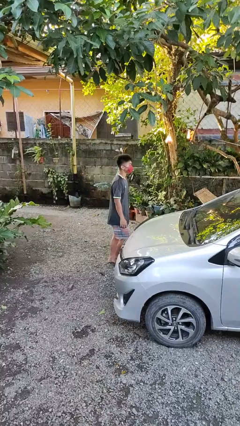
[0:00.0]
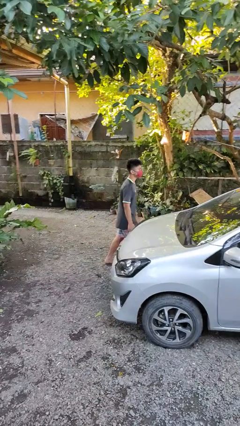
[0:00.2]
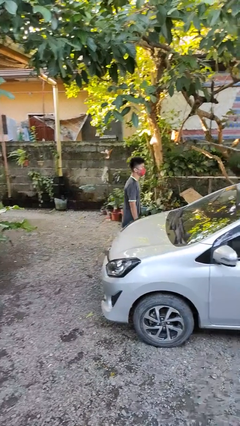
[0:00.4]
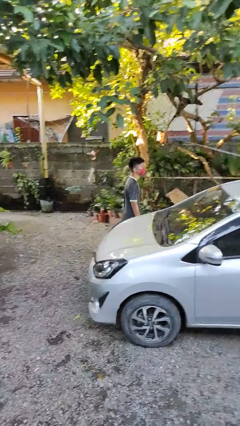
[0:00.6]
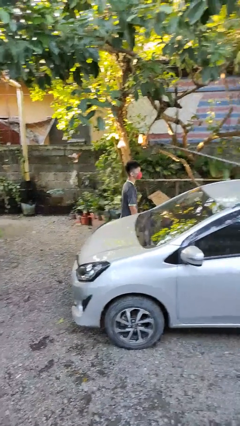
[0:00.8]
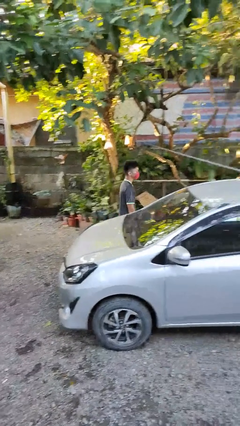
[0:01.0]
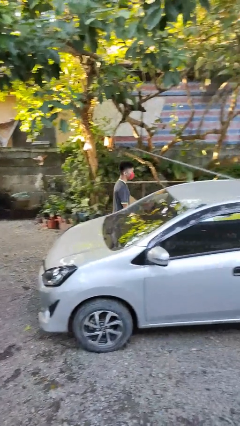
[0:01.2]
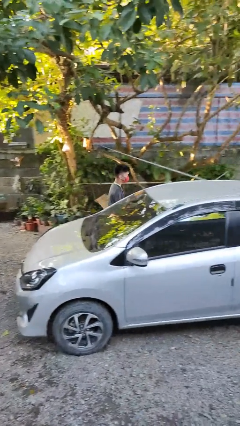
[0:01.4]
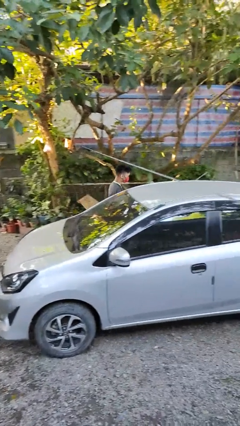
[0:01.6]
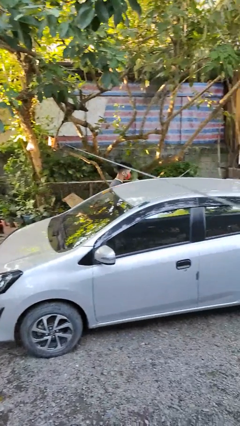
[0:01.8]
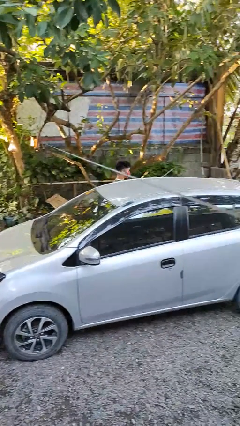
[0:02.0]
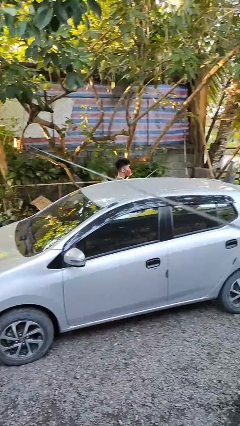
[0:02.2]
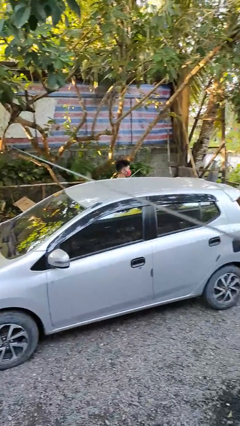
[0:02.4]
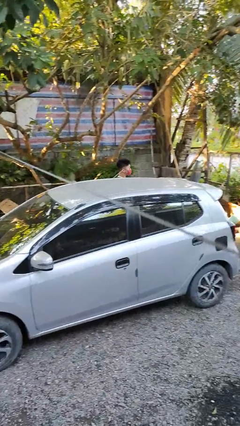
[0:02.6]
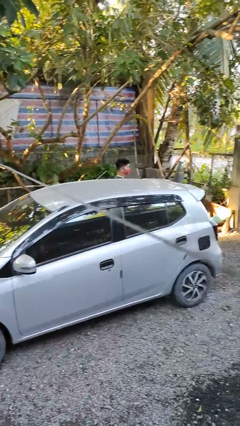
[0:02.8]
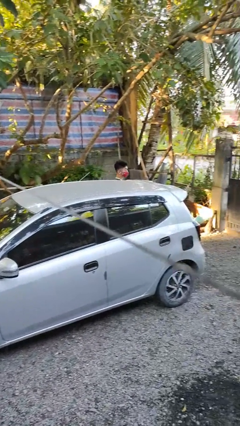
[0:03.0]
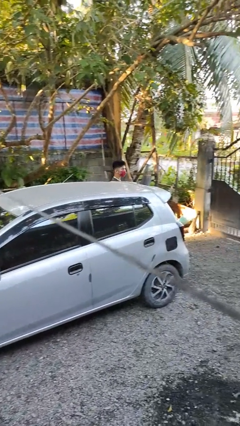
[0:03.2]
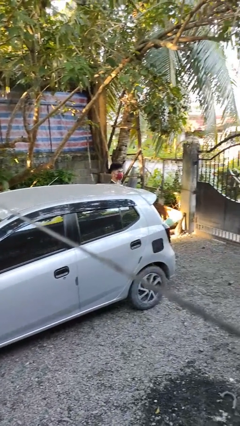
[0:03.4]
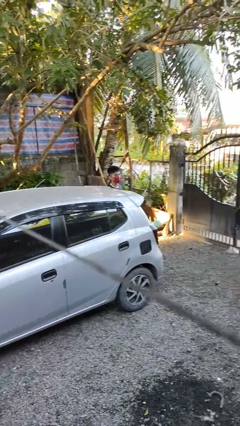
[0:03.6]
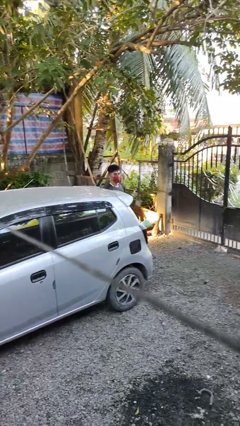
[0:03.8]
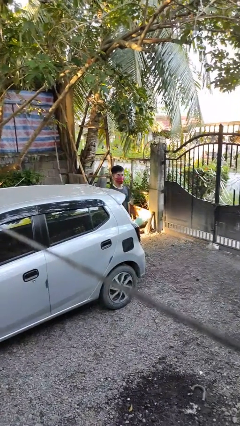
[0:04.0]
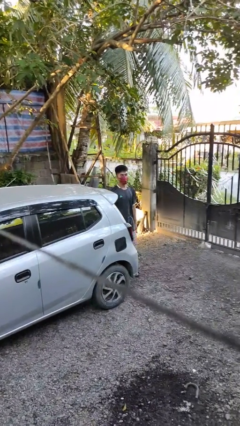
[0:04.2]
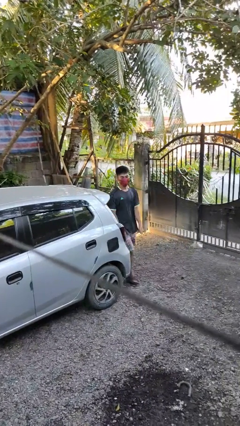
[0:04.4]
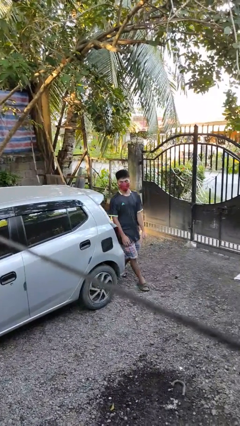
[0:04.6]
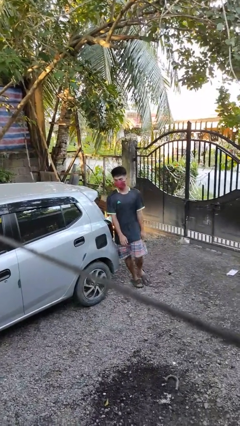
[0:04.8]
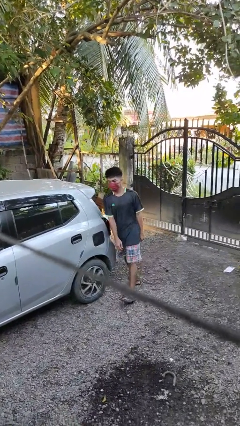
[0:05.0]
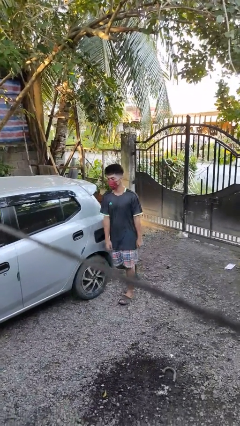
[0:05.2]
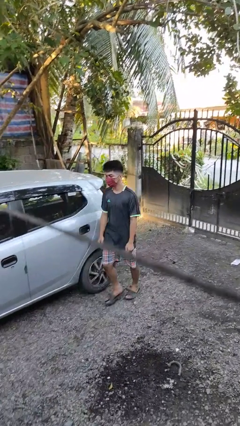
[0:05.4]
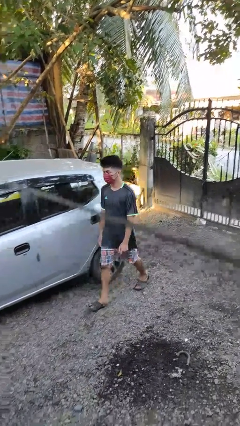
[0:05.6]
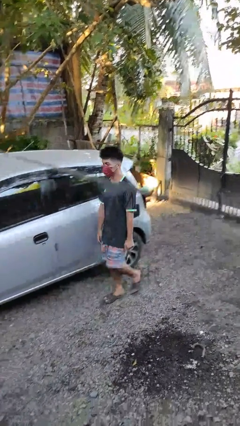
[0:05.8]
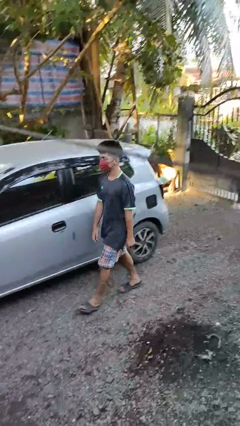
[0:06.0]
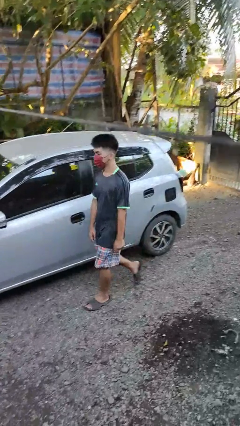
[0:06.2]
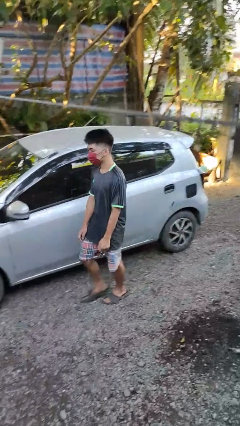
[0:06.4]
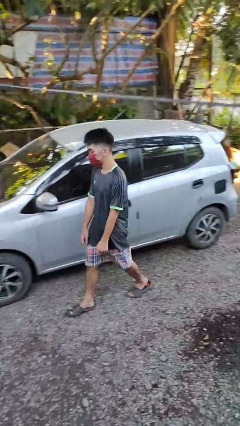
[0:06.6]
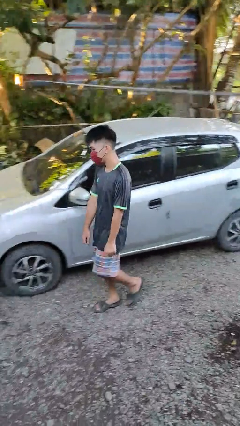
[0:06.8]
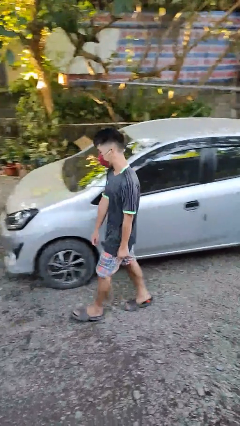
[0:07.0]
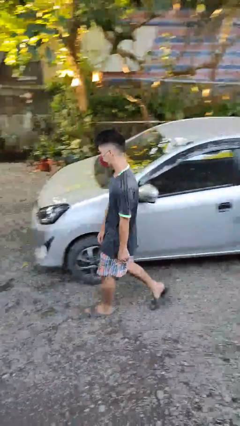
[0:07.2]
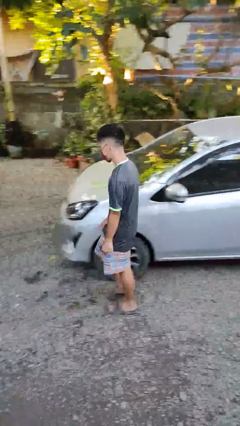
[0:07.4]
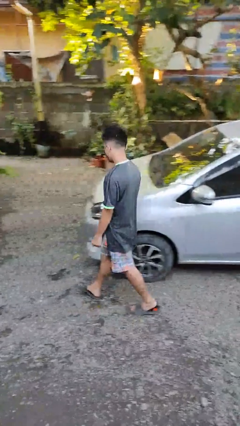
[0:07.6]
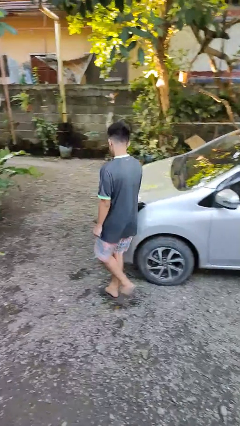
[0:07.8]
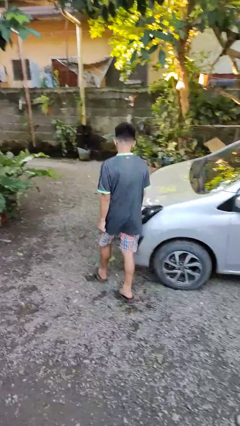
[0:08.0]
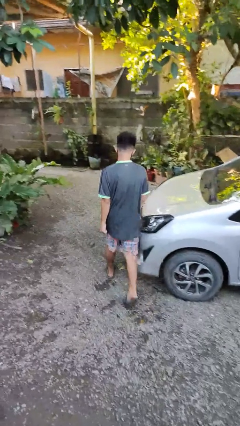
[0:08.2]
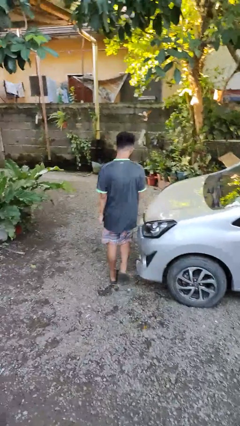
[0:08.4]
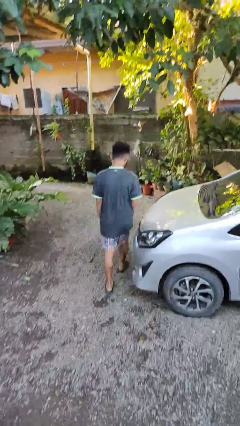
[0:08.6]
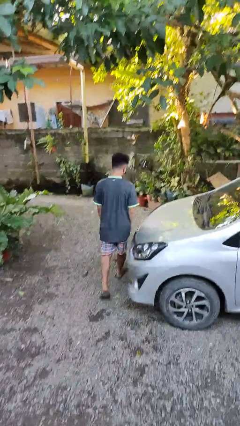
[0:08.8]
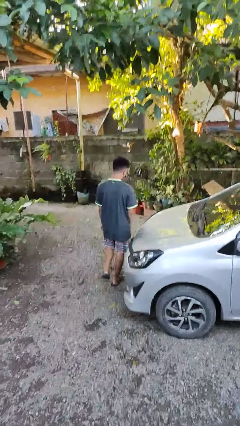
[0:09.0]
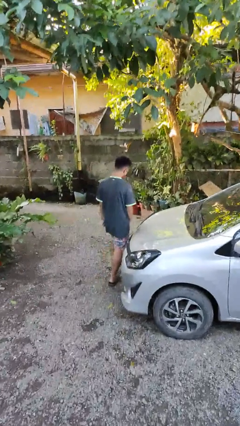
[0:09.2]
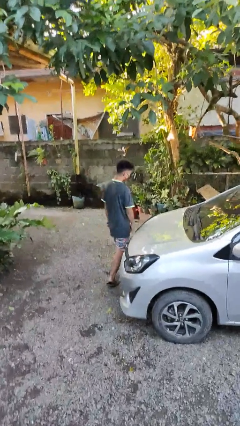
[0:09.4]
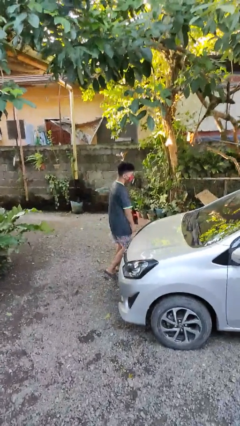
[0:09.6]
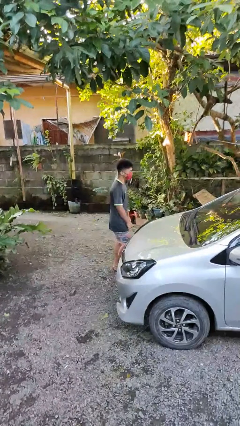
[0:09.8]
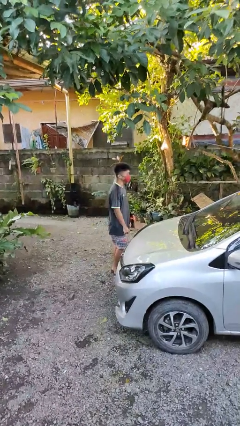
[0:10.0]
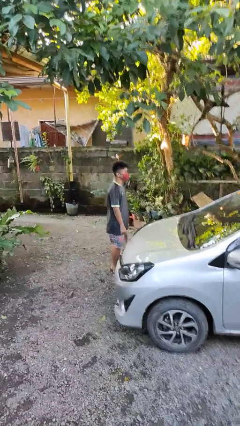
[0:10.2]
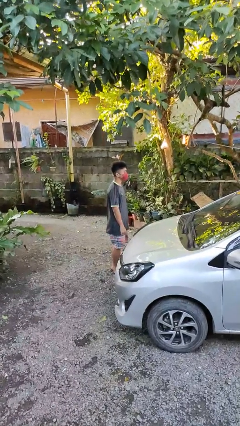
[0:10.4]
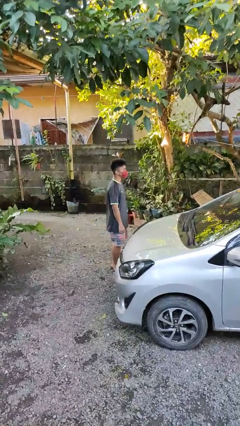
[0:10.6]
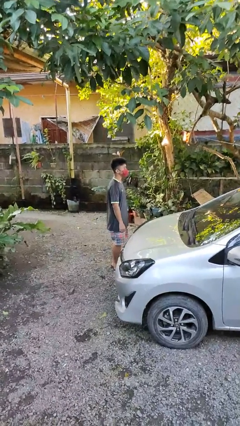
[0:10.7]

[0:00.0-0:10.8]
person walks around car

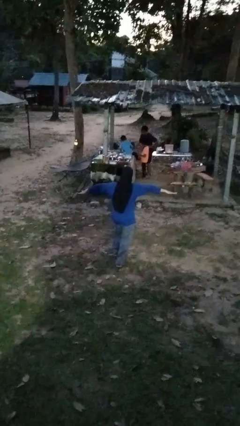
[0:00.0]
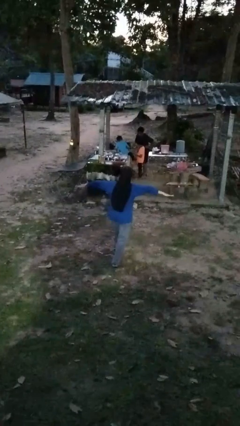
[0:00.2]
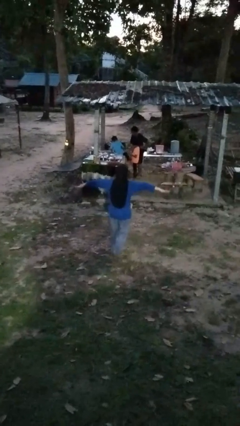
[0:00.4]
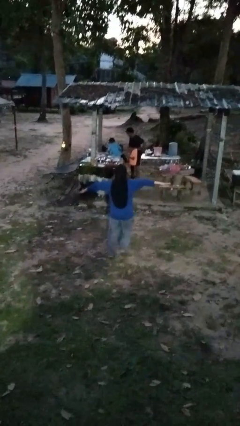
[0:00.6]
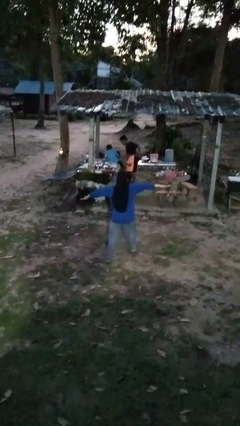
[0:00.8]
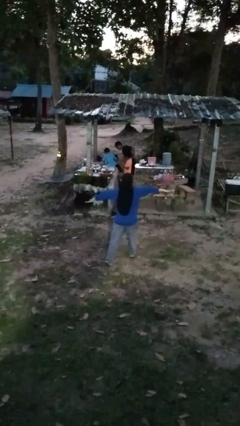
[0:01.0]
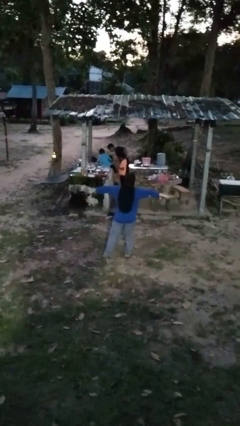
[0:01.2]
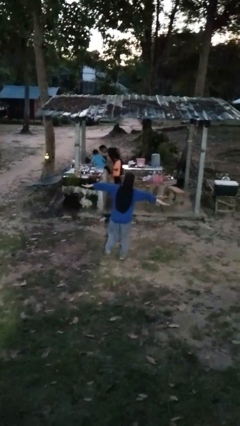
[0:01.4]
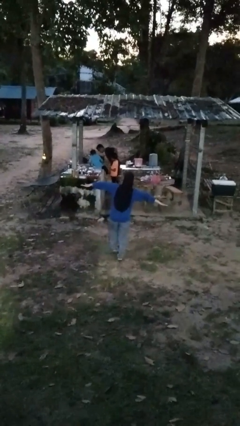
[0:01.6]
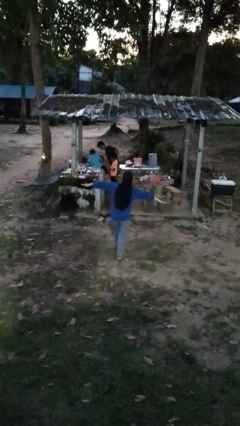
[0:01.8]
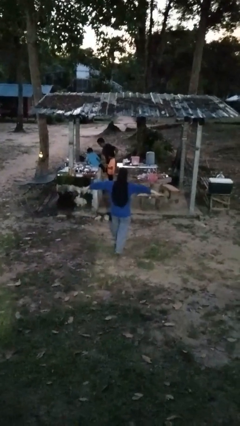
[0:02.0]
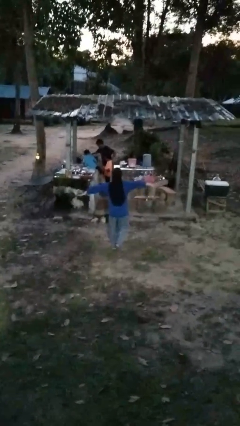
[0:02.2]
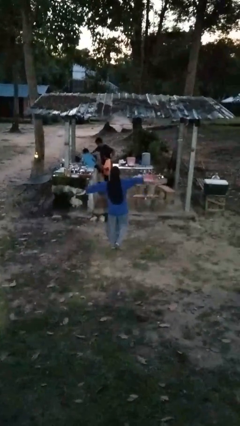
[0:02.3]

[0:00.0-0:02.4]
person walks tiptoe

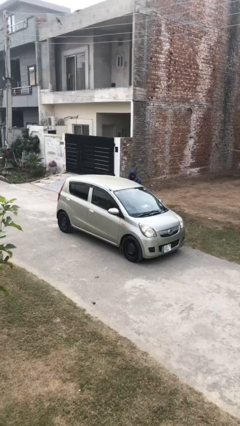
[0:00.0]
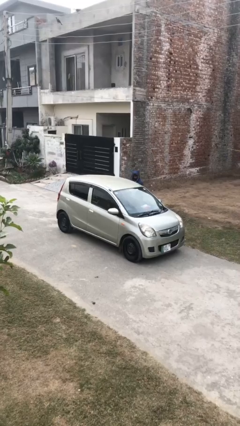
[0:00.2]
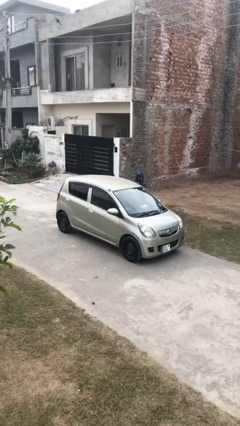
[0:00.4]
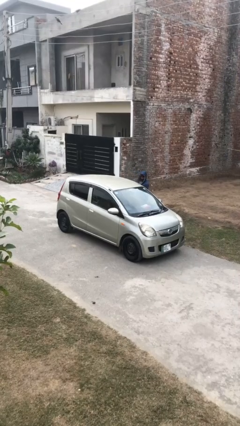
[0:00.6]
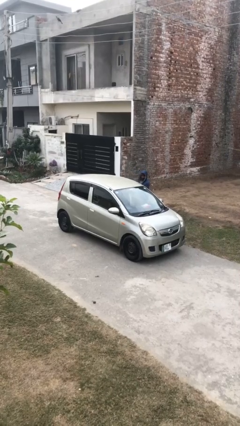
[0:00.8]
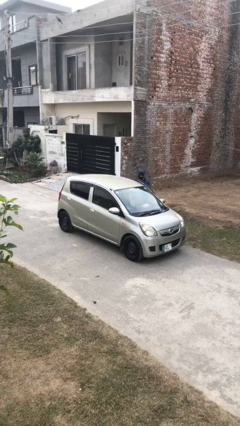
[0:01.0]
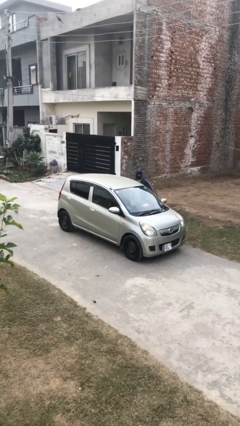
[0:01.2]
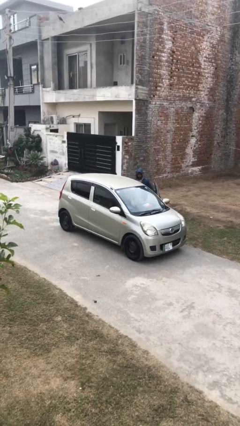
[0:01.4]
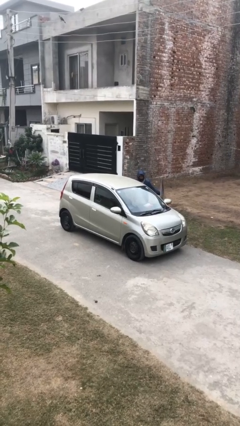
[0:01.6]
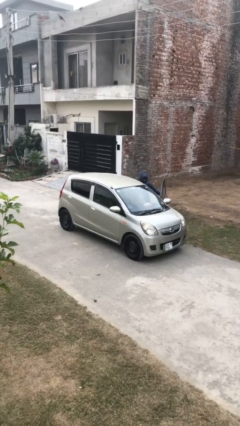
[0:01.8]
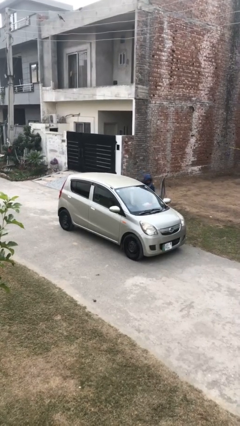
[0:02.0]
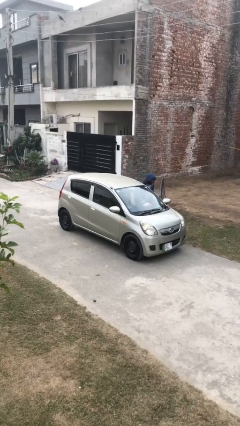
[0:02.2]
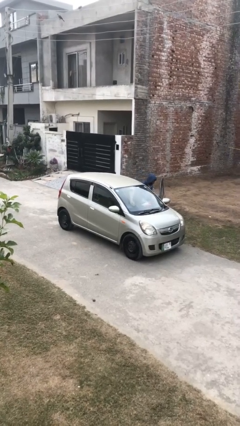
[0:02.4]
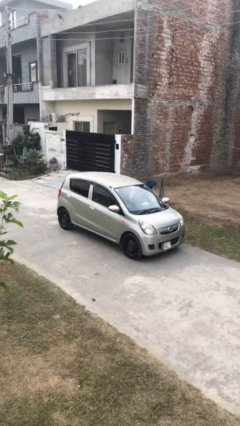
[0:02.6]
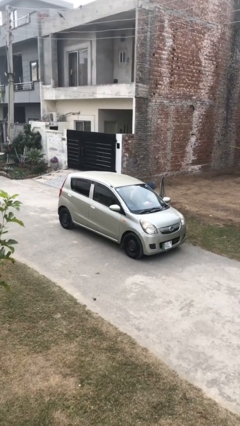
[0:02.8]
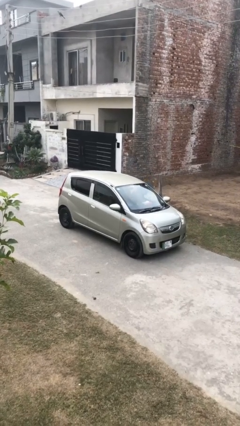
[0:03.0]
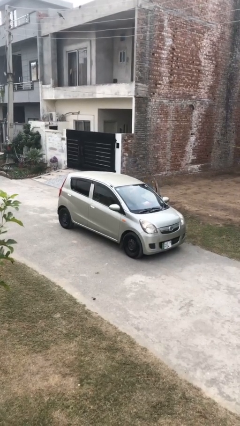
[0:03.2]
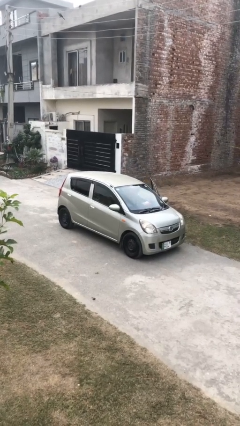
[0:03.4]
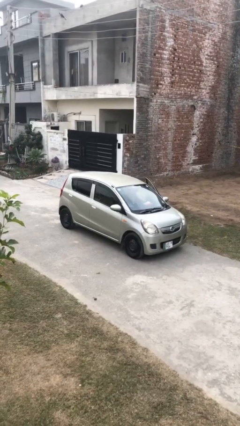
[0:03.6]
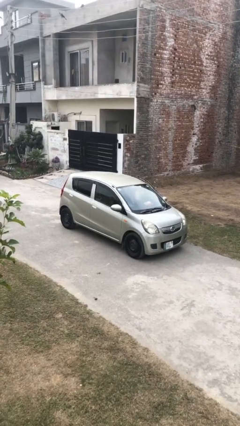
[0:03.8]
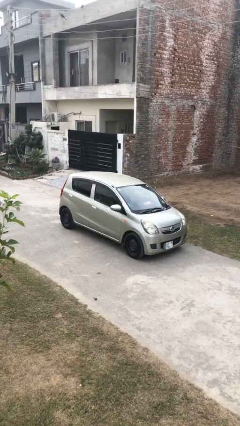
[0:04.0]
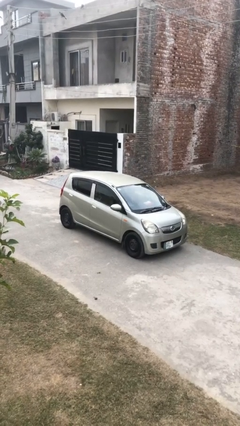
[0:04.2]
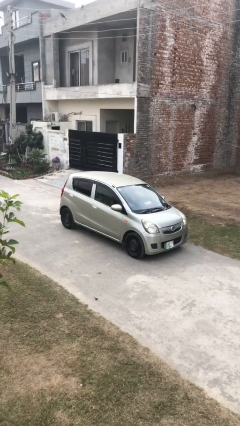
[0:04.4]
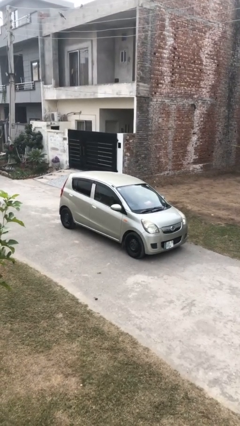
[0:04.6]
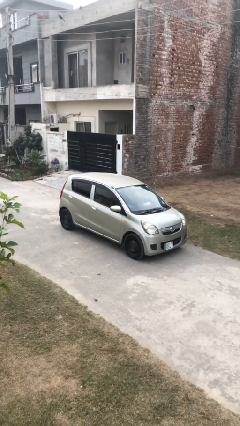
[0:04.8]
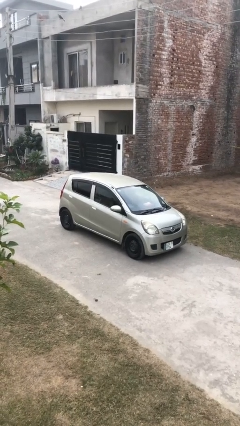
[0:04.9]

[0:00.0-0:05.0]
car picks up person
